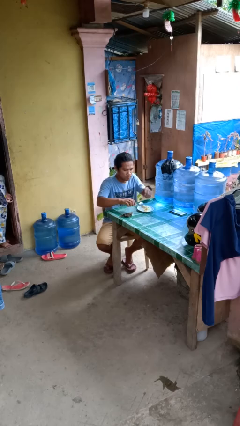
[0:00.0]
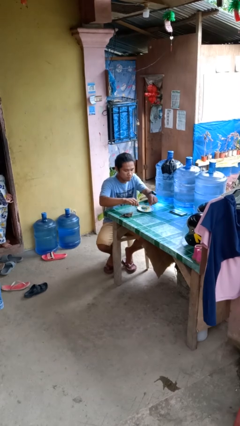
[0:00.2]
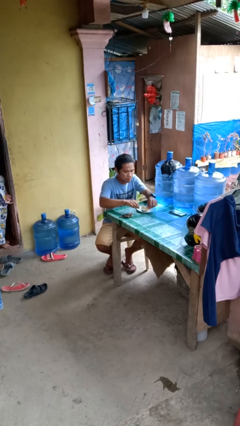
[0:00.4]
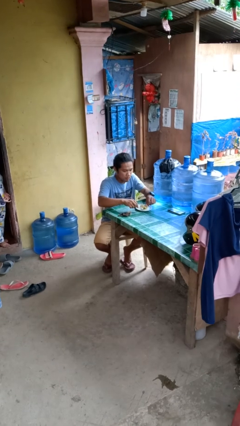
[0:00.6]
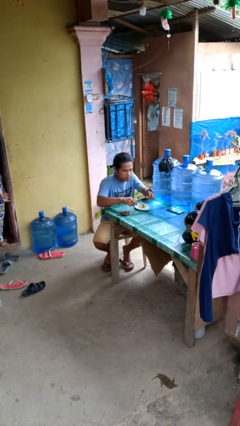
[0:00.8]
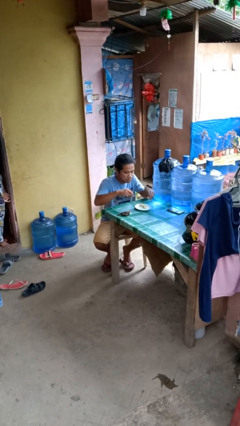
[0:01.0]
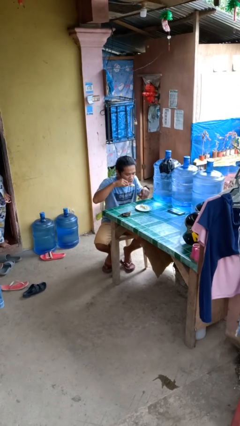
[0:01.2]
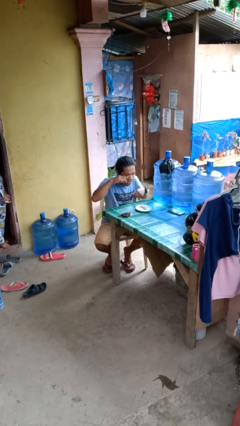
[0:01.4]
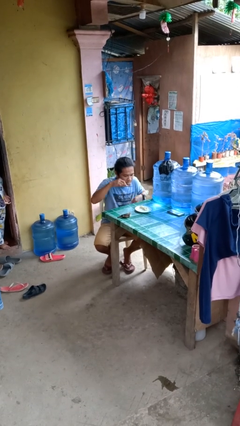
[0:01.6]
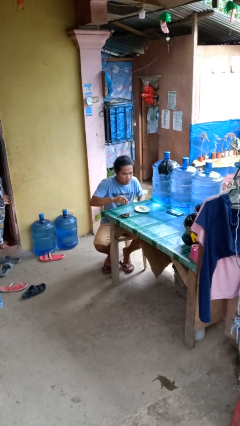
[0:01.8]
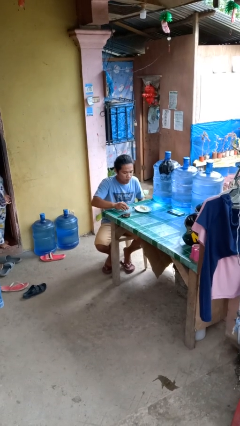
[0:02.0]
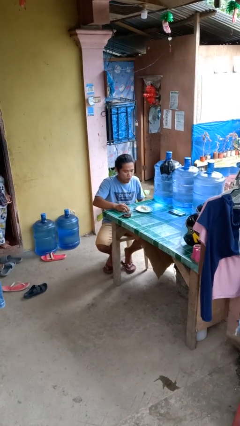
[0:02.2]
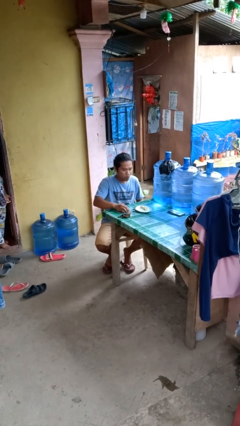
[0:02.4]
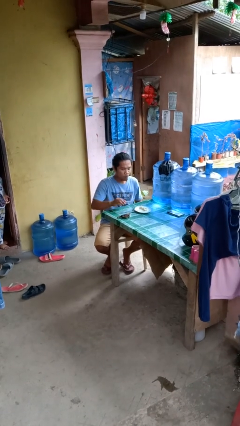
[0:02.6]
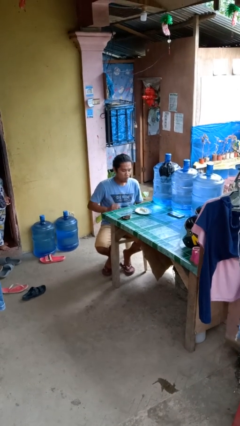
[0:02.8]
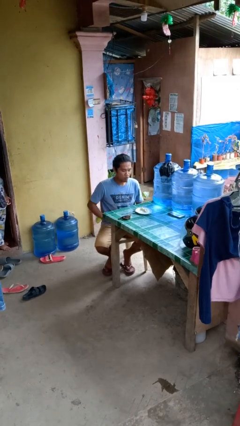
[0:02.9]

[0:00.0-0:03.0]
person eats with utensil

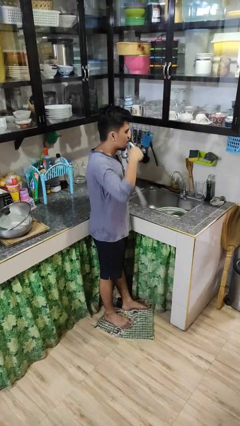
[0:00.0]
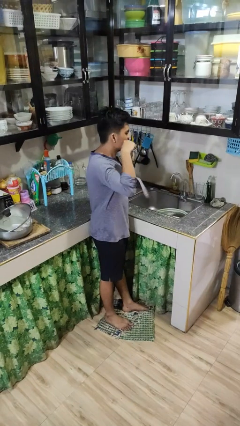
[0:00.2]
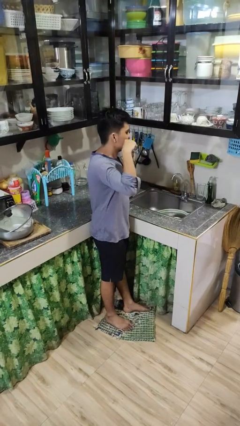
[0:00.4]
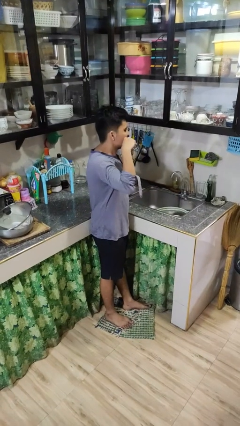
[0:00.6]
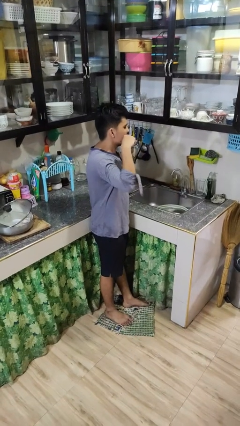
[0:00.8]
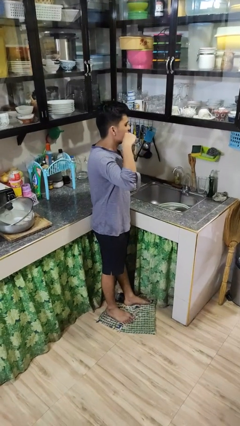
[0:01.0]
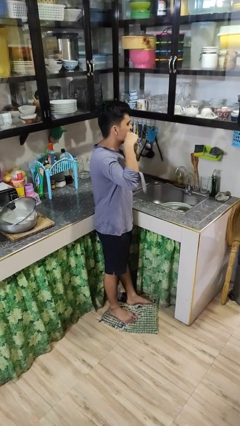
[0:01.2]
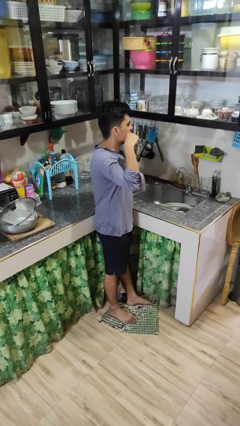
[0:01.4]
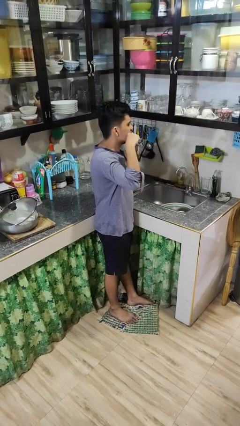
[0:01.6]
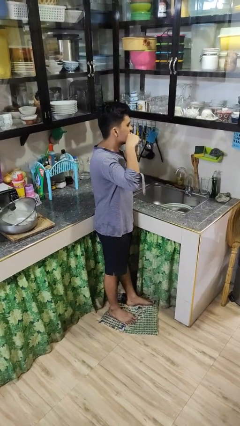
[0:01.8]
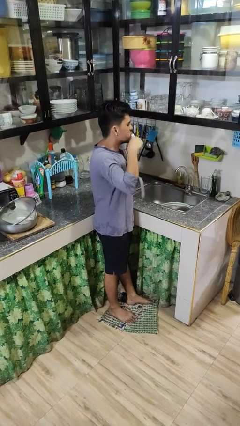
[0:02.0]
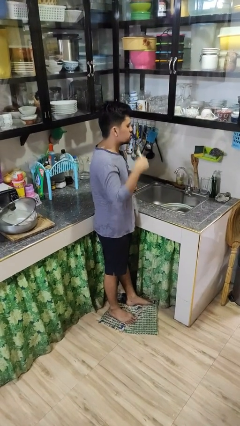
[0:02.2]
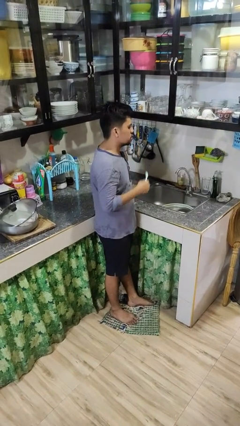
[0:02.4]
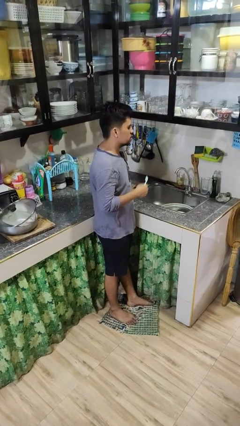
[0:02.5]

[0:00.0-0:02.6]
person brushes teeth

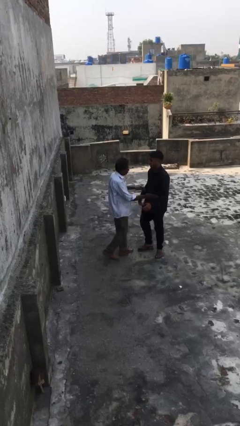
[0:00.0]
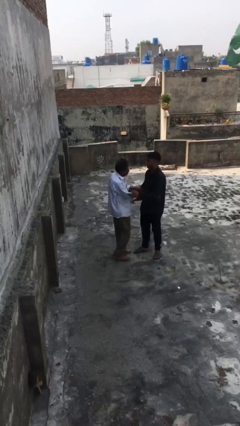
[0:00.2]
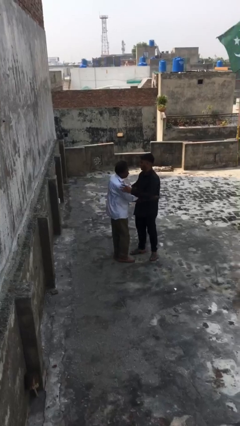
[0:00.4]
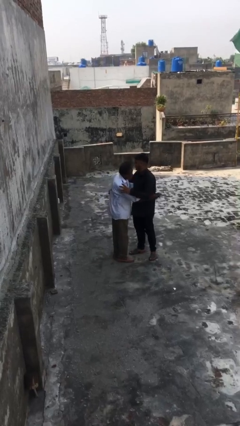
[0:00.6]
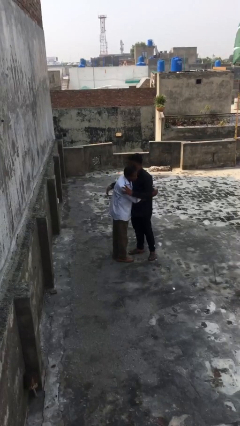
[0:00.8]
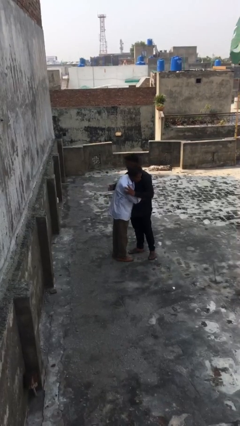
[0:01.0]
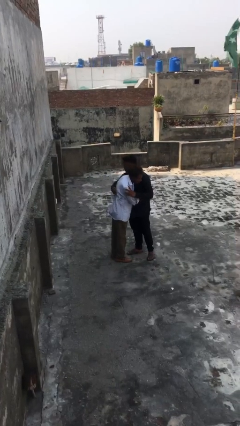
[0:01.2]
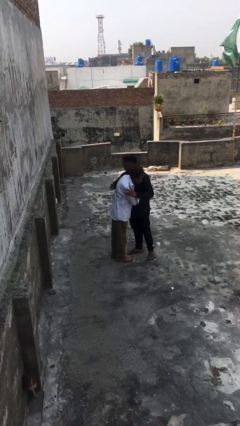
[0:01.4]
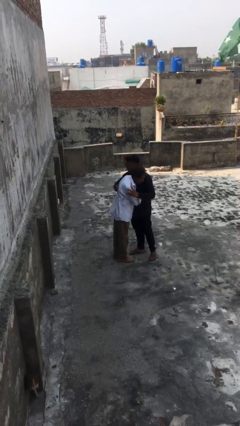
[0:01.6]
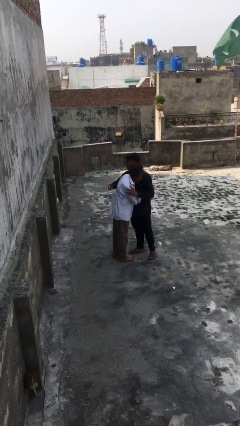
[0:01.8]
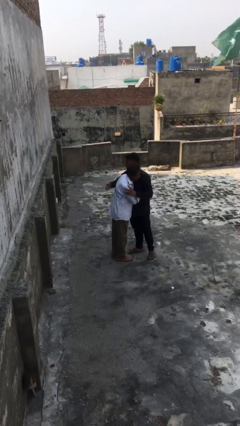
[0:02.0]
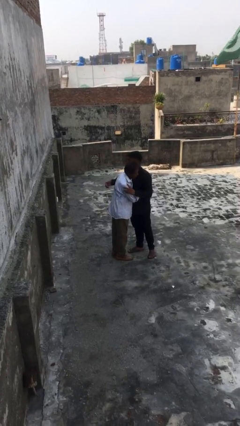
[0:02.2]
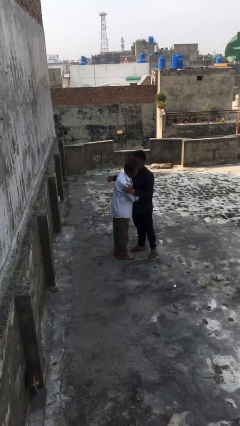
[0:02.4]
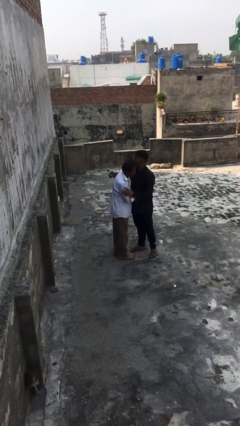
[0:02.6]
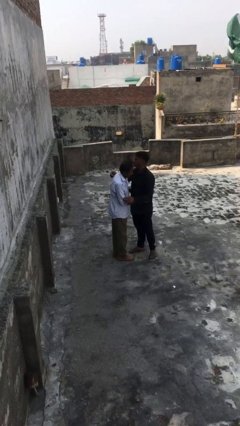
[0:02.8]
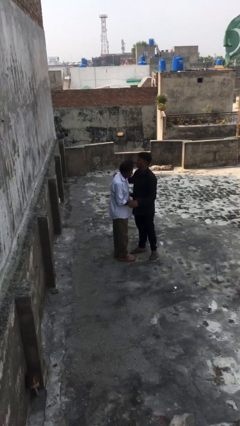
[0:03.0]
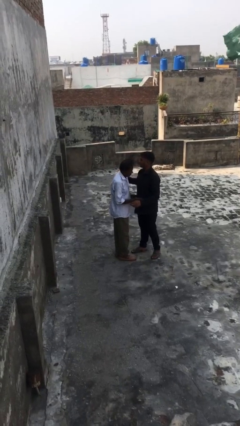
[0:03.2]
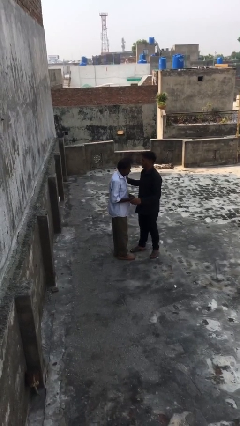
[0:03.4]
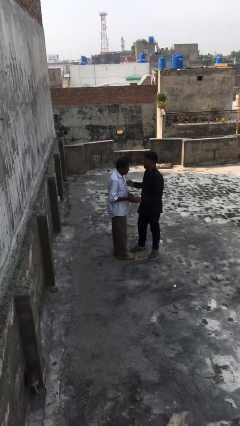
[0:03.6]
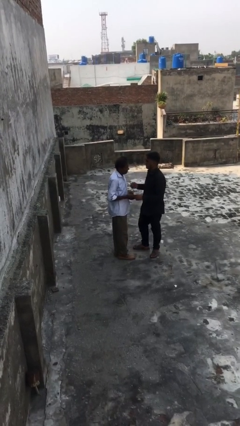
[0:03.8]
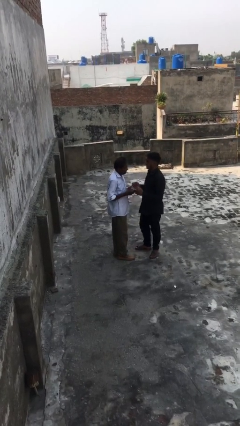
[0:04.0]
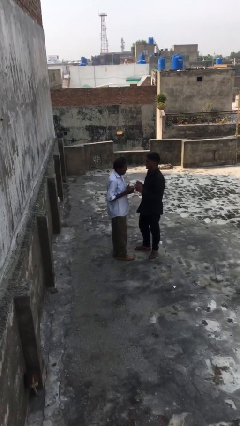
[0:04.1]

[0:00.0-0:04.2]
person embraces person

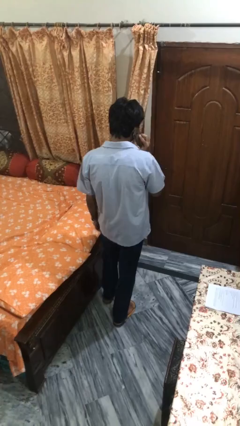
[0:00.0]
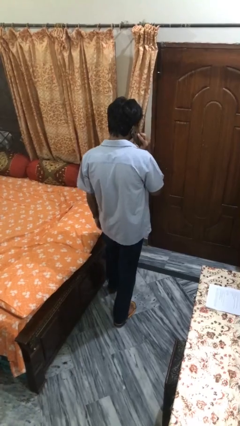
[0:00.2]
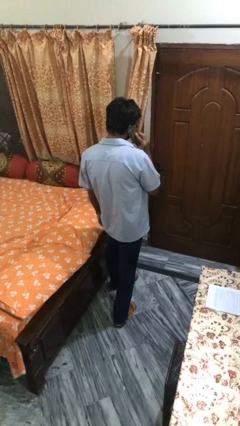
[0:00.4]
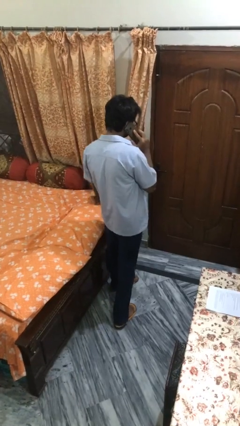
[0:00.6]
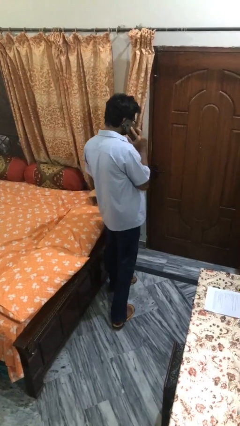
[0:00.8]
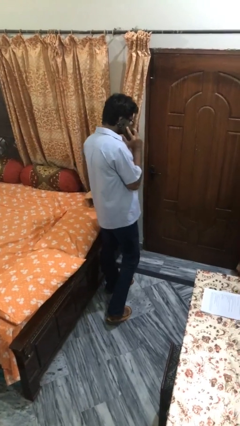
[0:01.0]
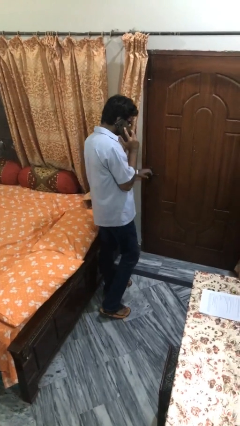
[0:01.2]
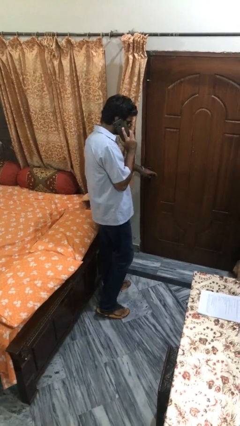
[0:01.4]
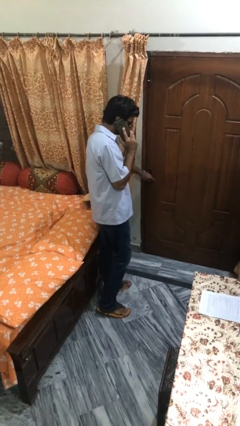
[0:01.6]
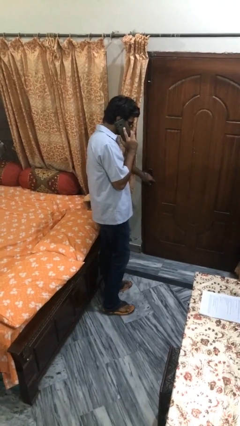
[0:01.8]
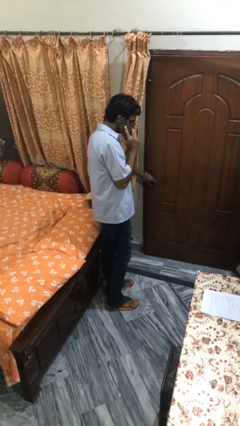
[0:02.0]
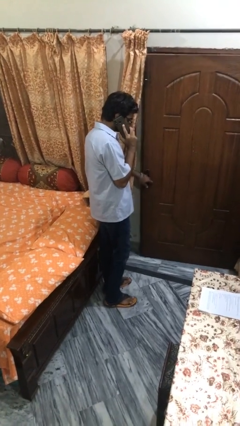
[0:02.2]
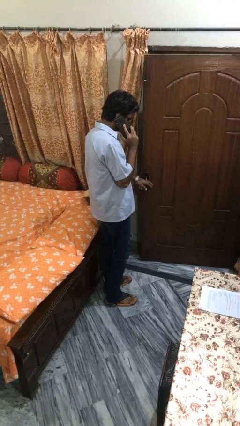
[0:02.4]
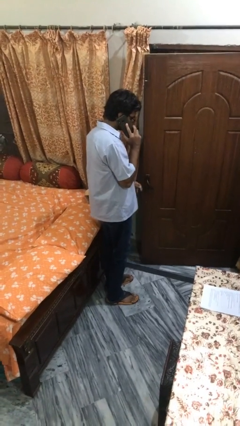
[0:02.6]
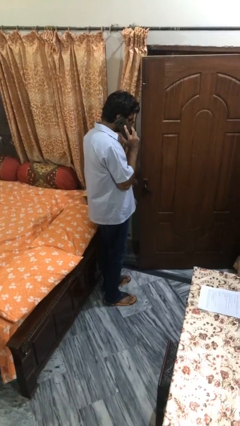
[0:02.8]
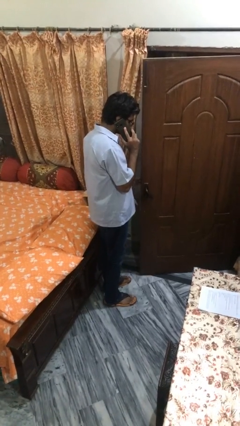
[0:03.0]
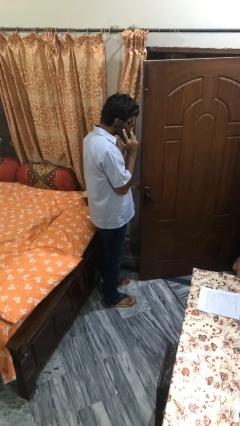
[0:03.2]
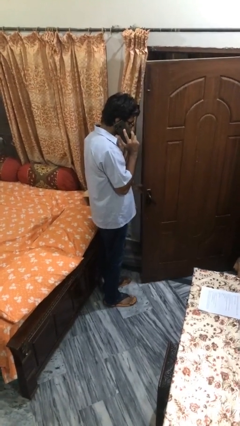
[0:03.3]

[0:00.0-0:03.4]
person opens facility door

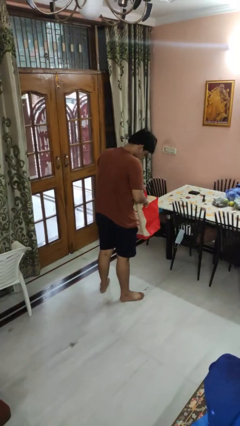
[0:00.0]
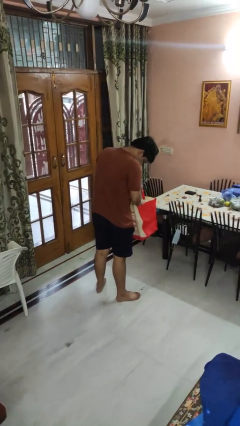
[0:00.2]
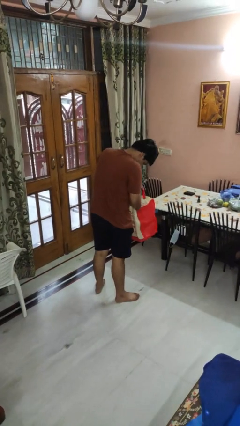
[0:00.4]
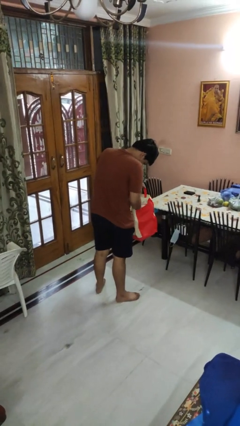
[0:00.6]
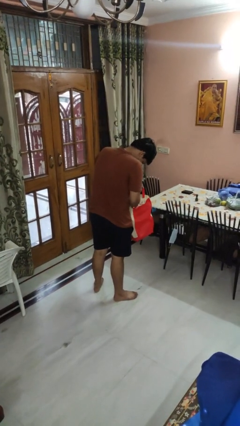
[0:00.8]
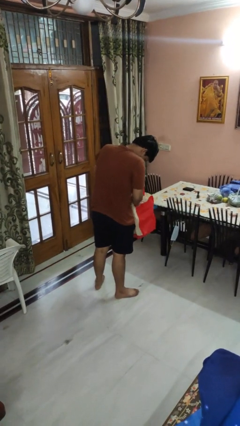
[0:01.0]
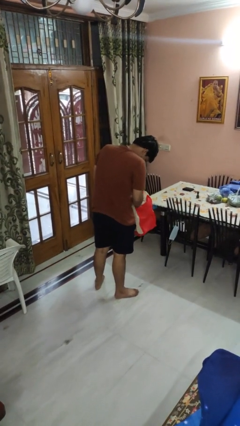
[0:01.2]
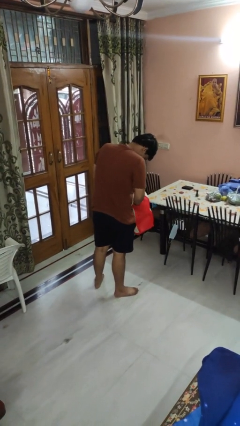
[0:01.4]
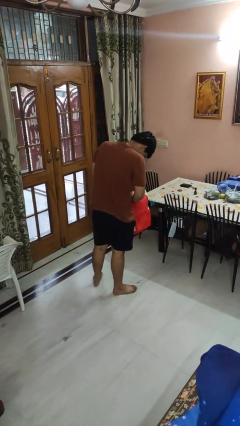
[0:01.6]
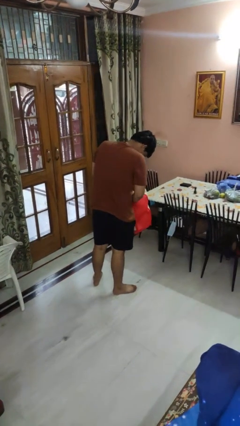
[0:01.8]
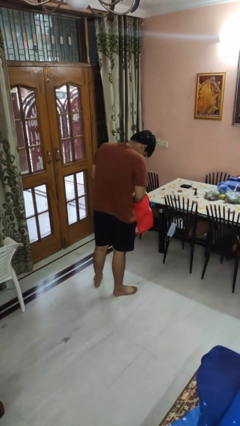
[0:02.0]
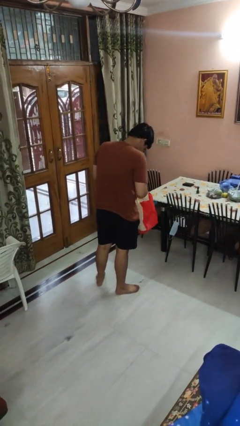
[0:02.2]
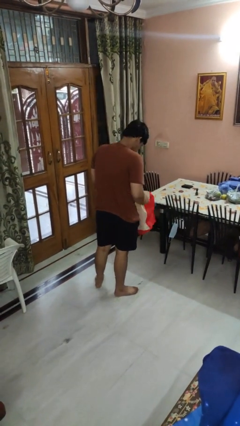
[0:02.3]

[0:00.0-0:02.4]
person searches in bag

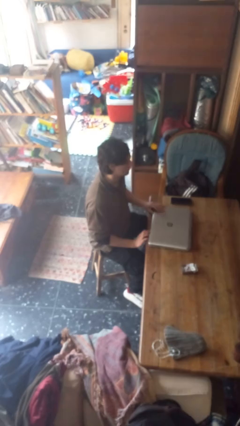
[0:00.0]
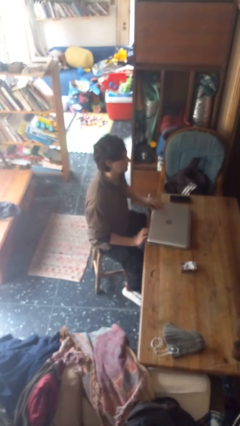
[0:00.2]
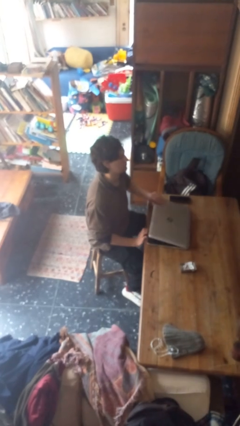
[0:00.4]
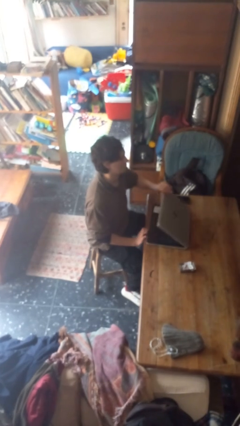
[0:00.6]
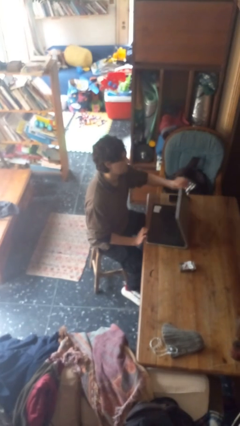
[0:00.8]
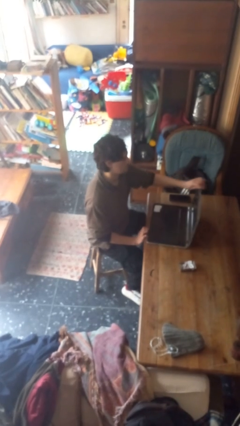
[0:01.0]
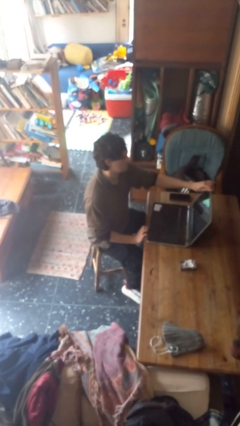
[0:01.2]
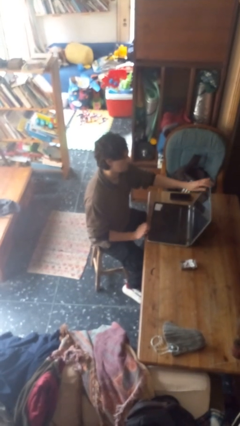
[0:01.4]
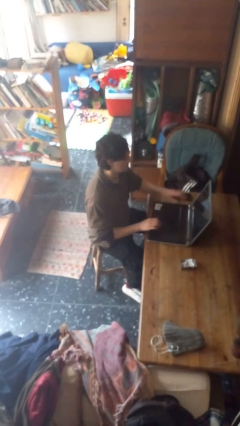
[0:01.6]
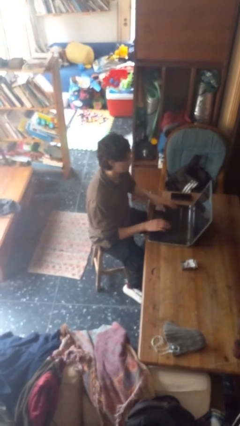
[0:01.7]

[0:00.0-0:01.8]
person opens laptop
